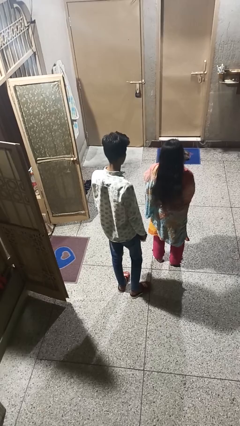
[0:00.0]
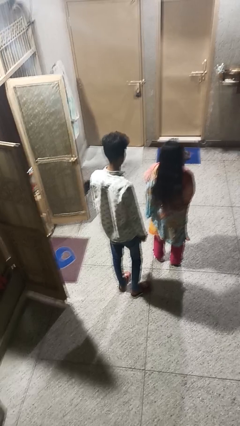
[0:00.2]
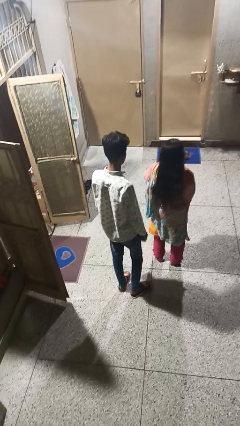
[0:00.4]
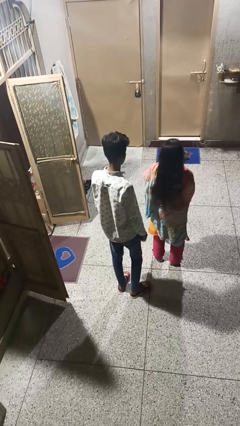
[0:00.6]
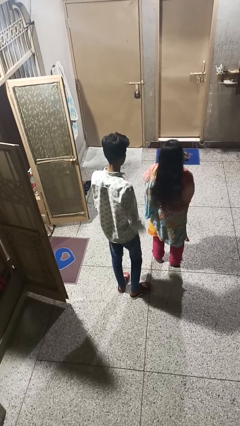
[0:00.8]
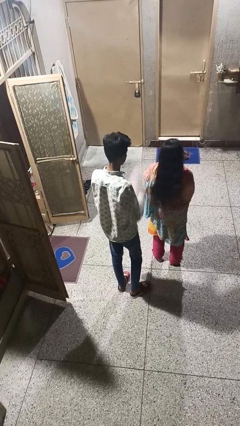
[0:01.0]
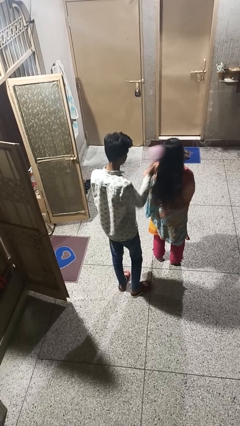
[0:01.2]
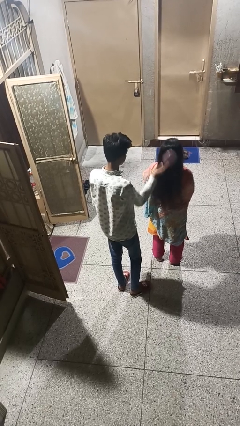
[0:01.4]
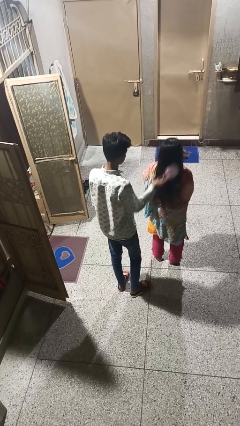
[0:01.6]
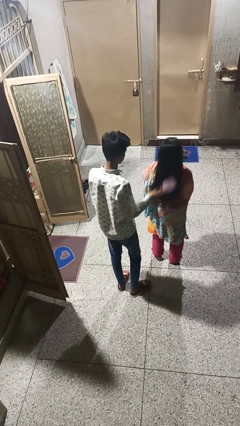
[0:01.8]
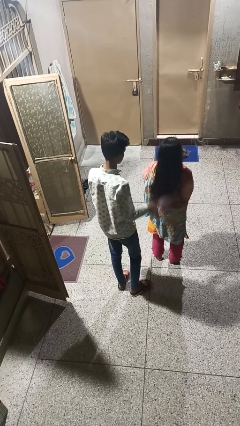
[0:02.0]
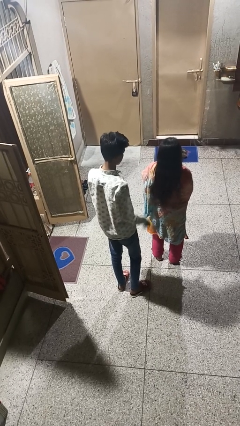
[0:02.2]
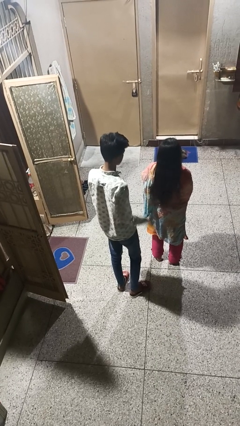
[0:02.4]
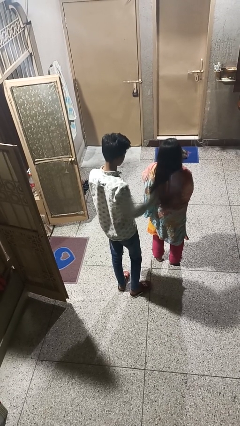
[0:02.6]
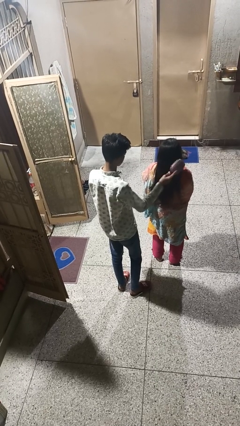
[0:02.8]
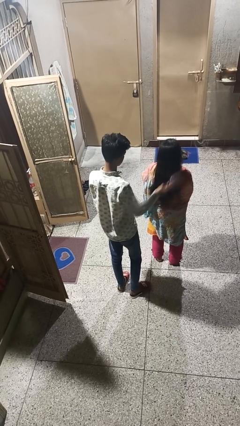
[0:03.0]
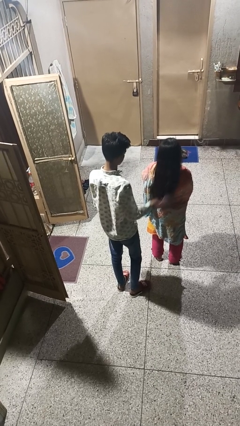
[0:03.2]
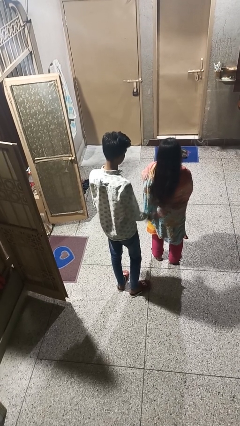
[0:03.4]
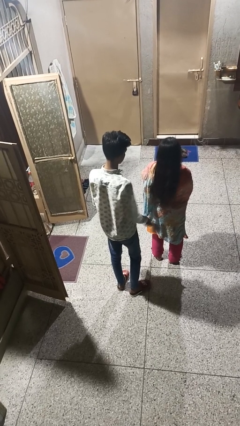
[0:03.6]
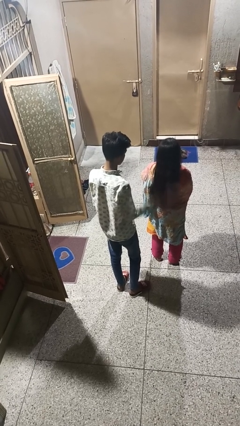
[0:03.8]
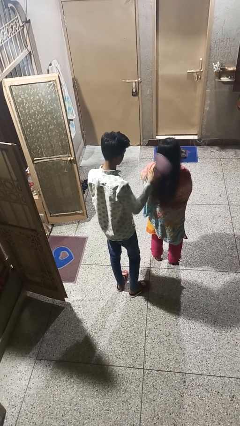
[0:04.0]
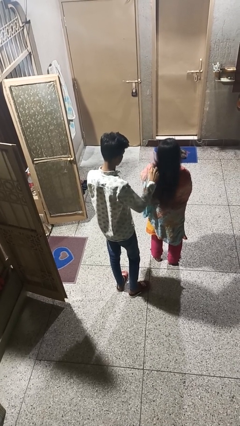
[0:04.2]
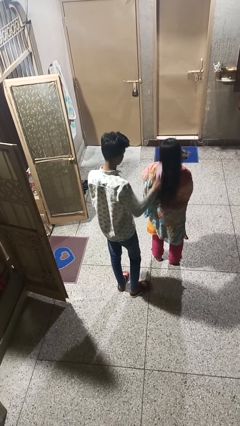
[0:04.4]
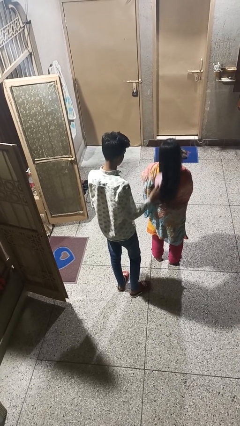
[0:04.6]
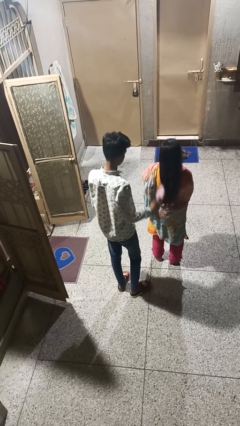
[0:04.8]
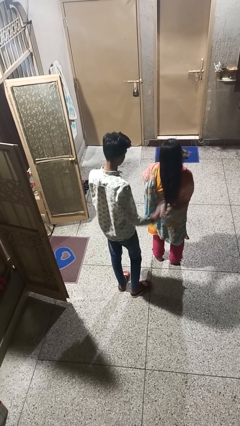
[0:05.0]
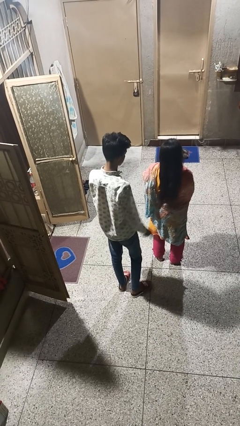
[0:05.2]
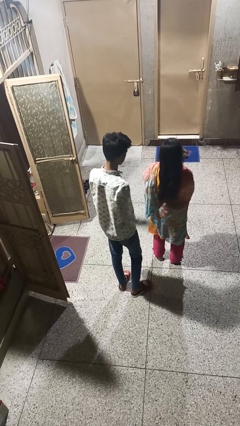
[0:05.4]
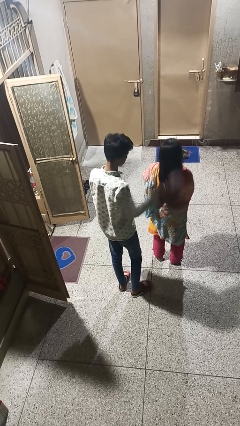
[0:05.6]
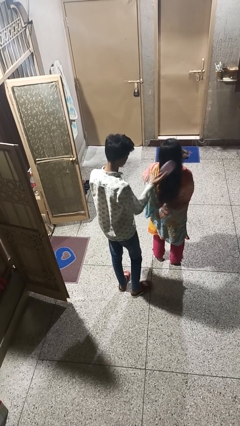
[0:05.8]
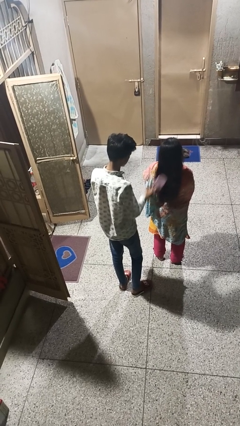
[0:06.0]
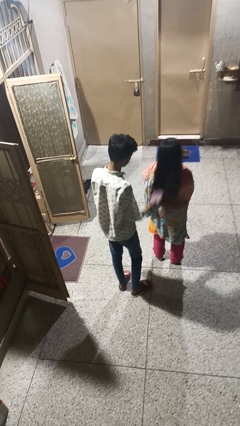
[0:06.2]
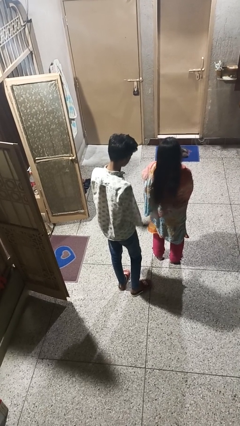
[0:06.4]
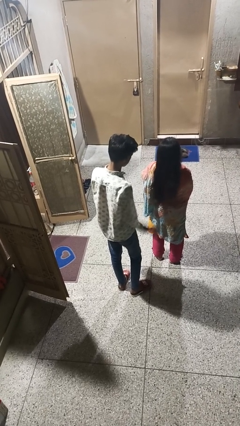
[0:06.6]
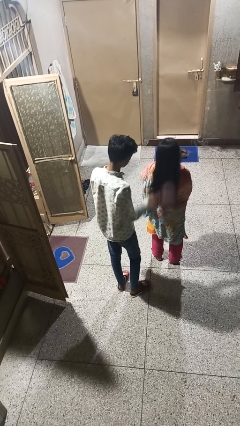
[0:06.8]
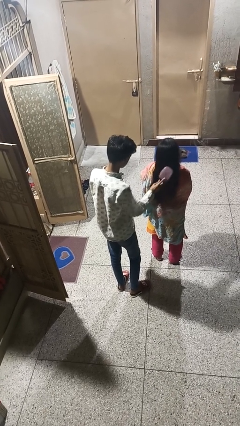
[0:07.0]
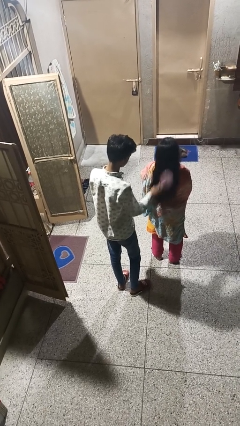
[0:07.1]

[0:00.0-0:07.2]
person brushes hair of person

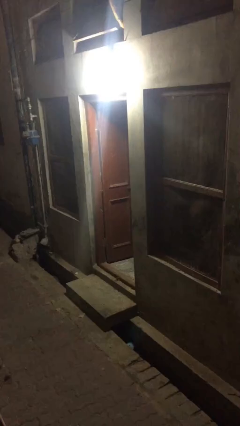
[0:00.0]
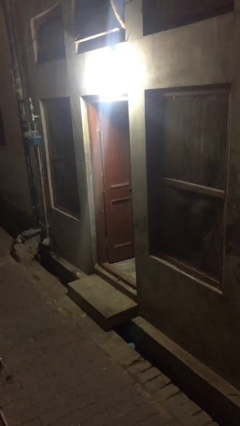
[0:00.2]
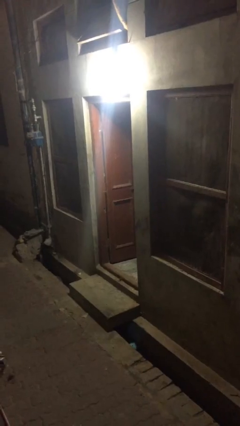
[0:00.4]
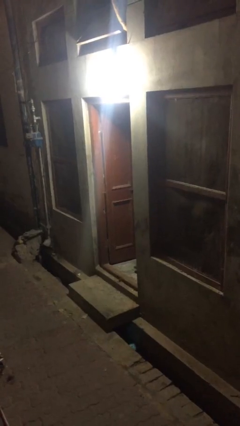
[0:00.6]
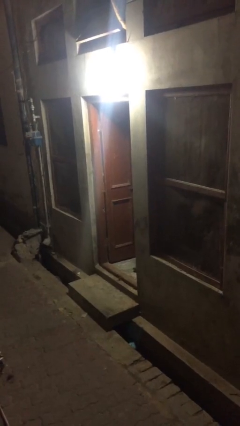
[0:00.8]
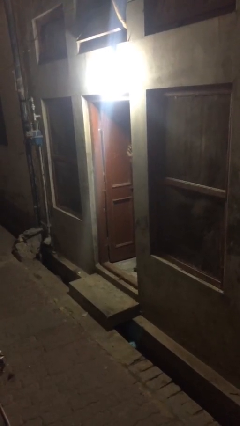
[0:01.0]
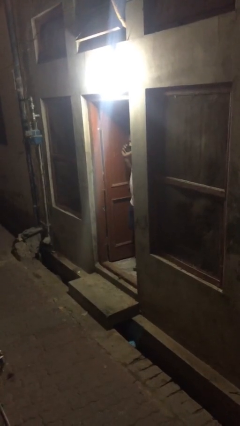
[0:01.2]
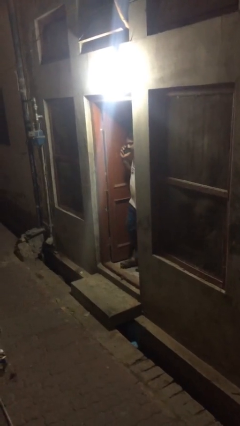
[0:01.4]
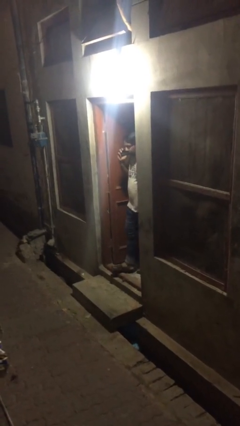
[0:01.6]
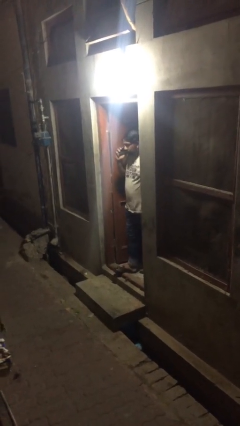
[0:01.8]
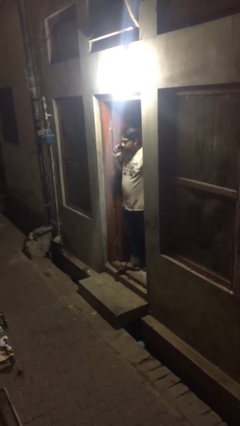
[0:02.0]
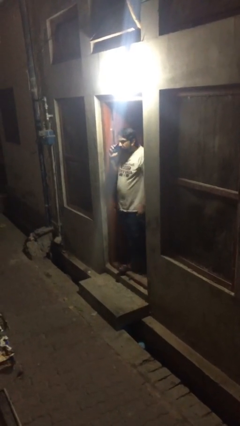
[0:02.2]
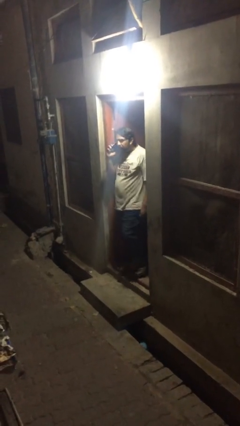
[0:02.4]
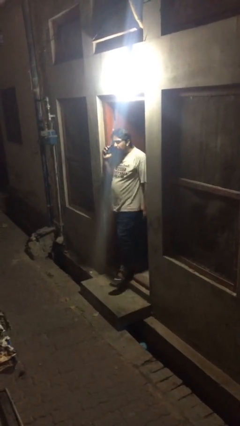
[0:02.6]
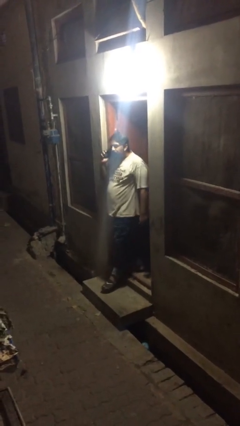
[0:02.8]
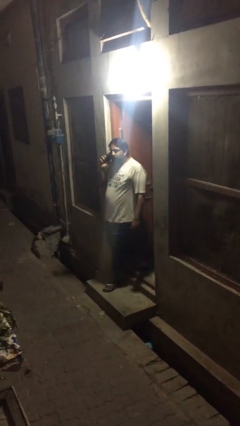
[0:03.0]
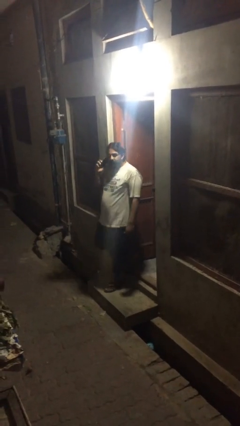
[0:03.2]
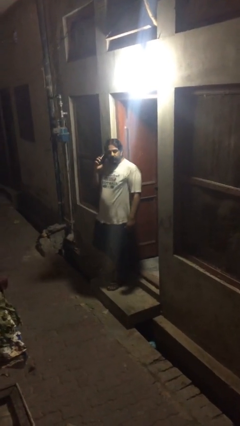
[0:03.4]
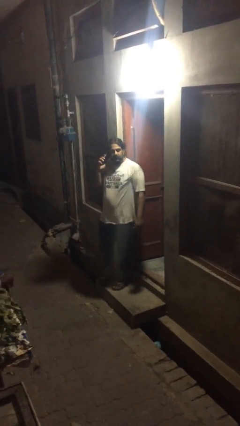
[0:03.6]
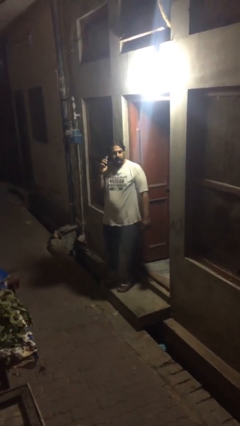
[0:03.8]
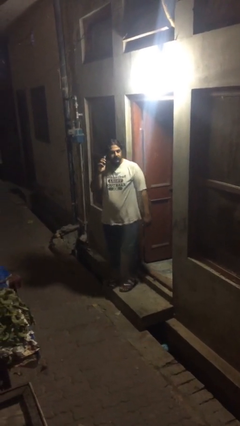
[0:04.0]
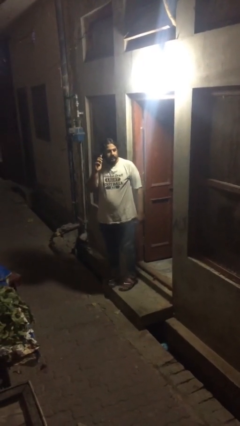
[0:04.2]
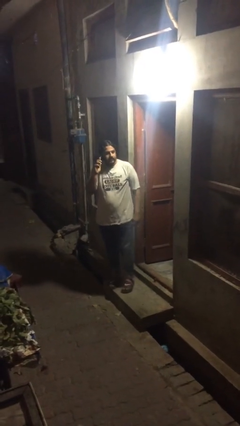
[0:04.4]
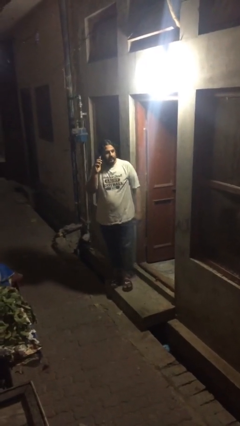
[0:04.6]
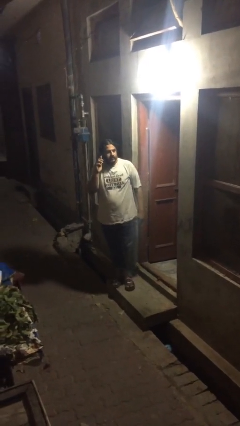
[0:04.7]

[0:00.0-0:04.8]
person enters scene through structure

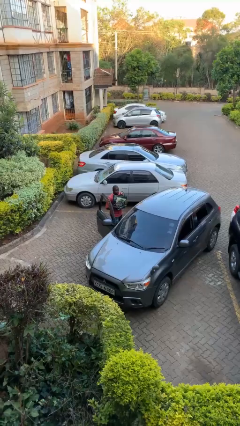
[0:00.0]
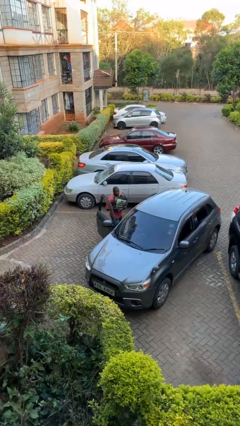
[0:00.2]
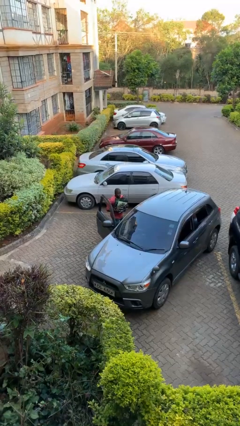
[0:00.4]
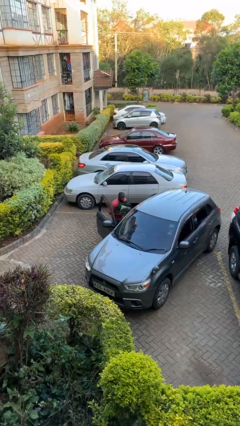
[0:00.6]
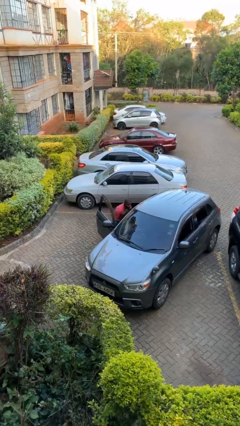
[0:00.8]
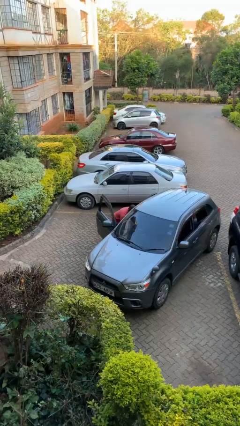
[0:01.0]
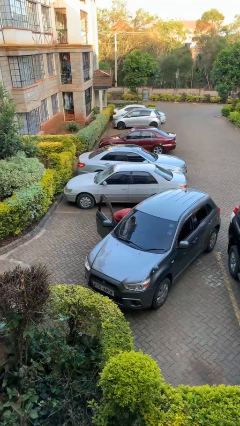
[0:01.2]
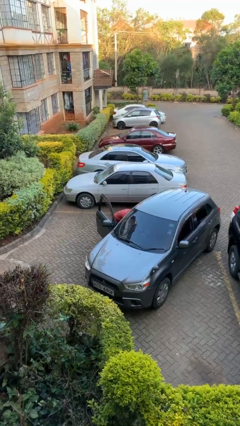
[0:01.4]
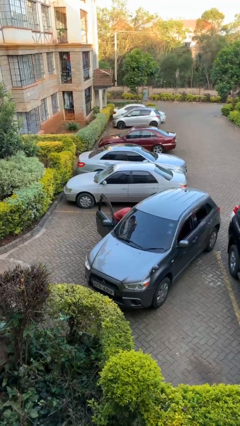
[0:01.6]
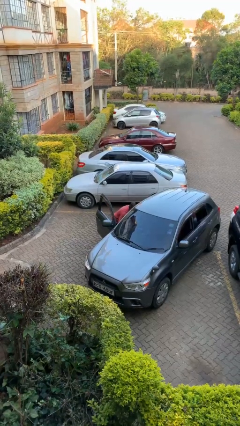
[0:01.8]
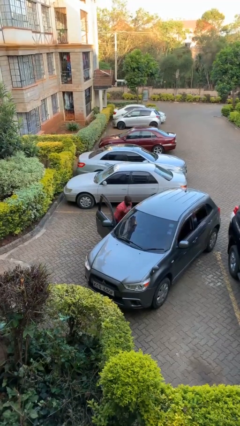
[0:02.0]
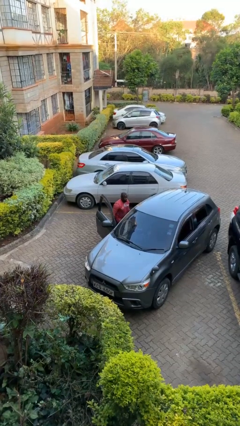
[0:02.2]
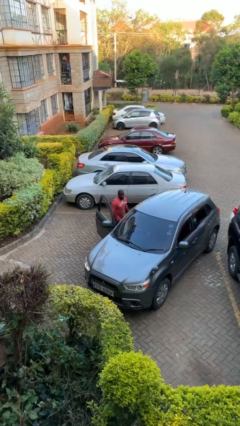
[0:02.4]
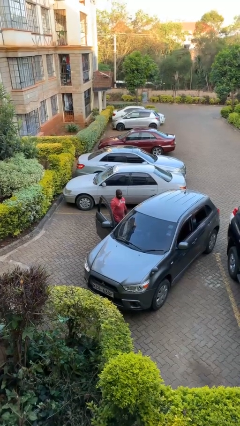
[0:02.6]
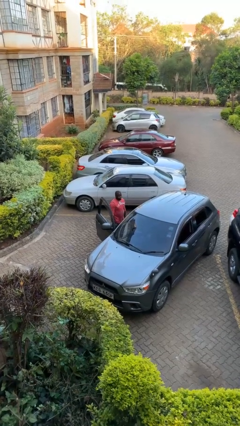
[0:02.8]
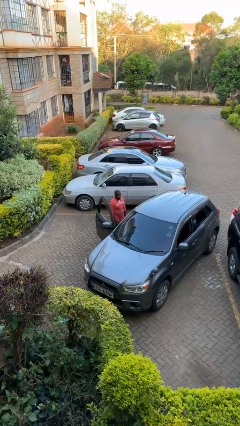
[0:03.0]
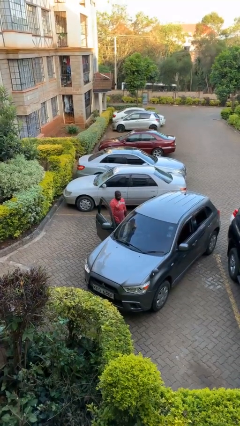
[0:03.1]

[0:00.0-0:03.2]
person loads car

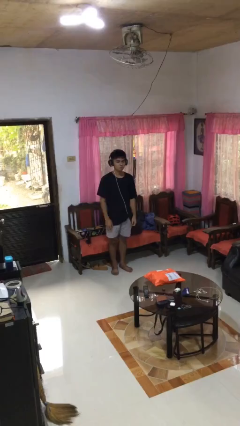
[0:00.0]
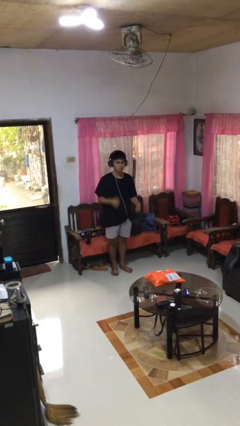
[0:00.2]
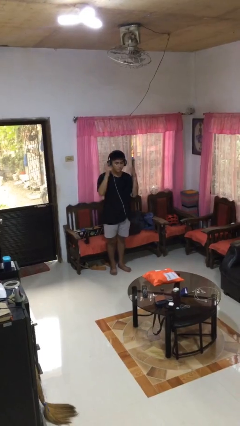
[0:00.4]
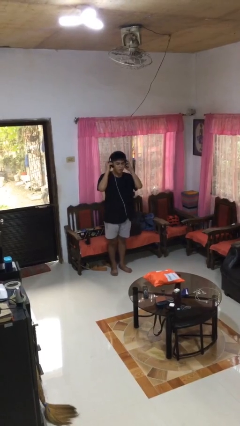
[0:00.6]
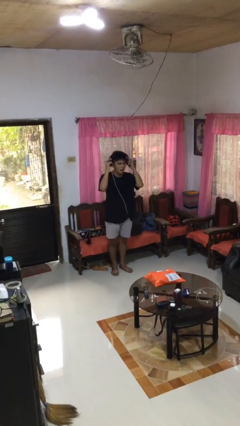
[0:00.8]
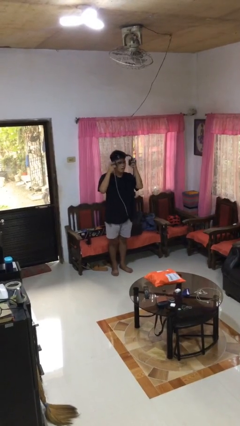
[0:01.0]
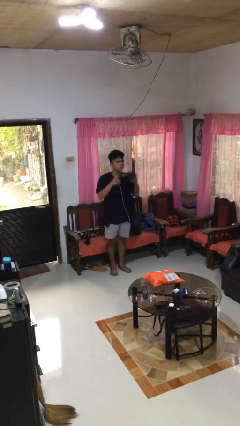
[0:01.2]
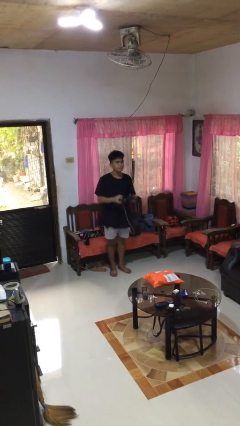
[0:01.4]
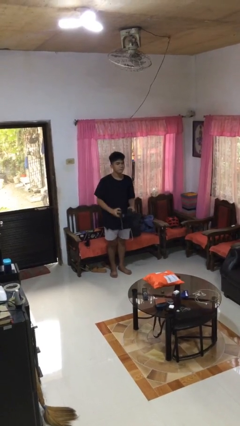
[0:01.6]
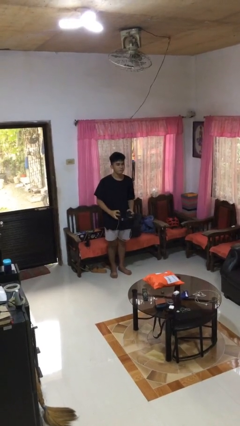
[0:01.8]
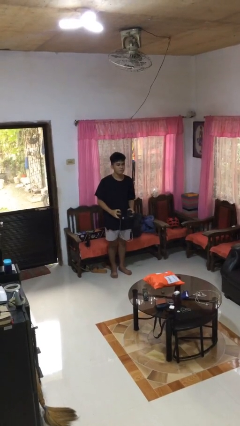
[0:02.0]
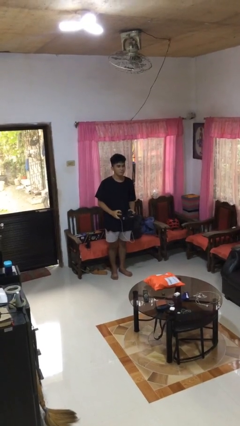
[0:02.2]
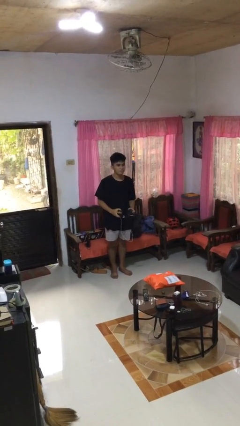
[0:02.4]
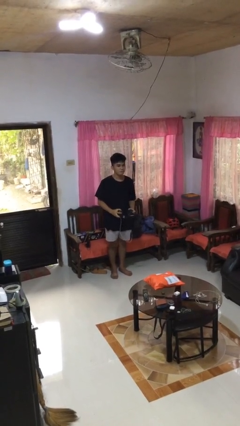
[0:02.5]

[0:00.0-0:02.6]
person takes off headphones

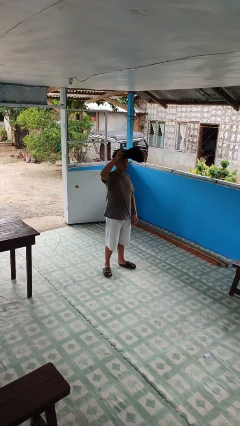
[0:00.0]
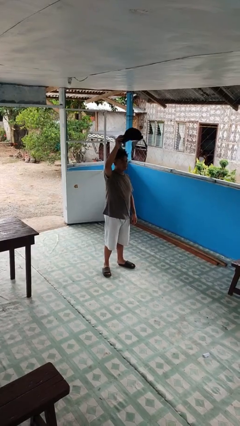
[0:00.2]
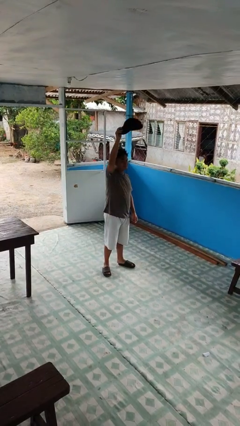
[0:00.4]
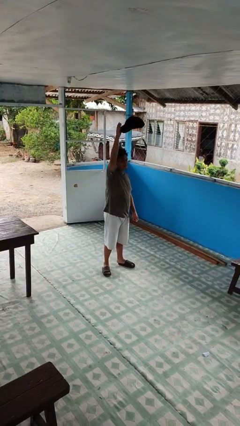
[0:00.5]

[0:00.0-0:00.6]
person drops object
